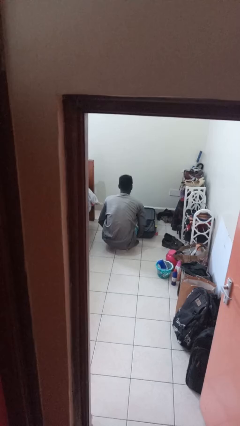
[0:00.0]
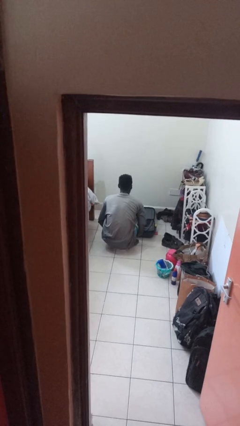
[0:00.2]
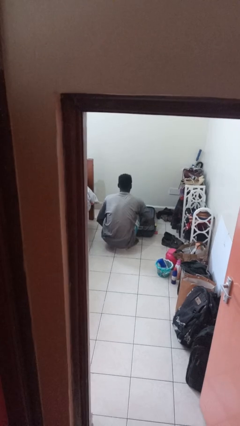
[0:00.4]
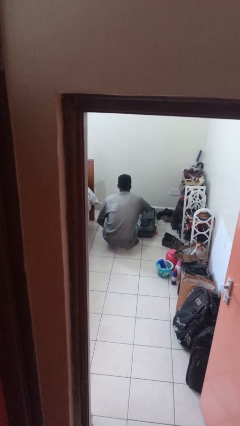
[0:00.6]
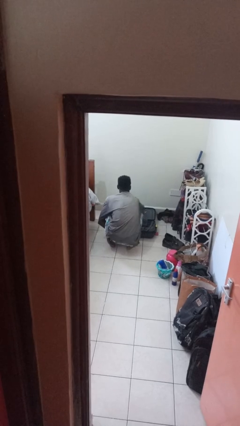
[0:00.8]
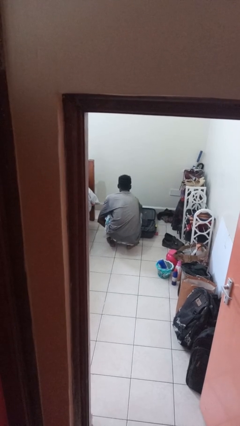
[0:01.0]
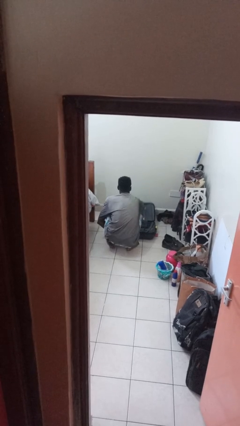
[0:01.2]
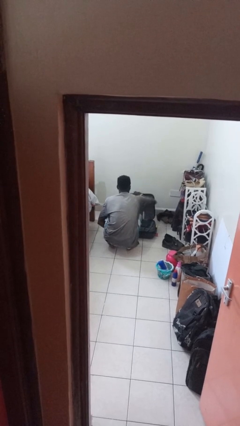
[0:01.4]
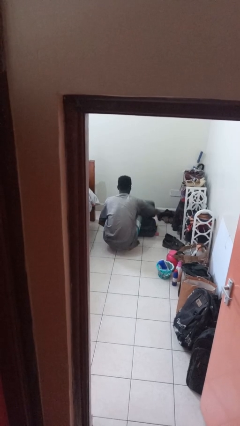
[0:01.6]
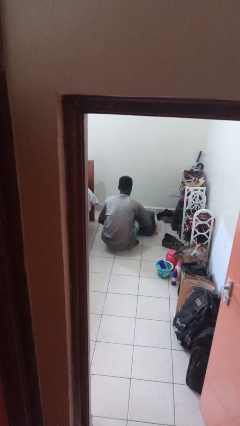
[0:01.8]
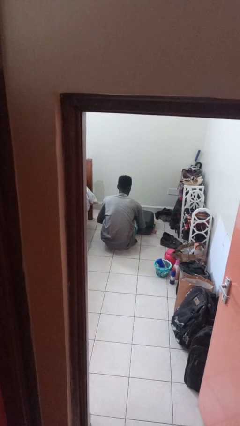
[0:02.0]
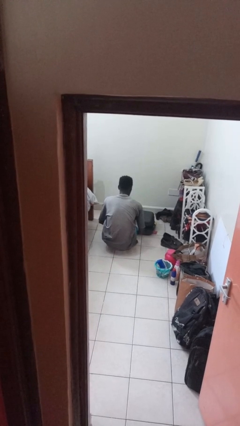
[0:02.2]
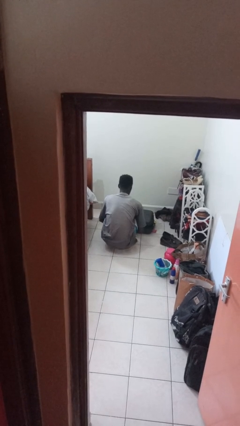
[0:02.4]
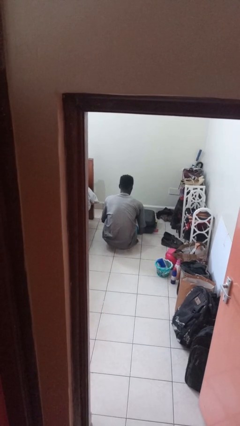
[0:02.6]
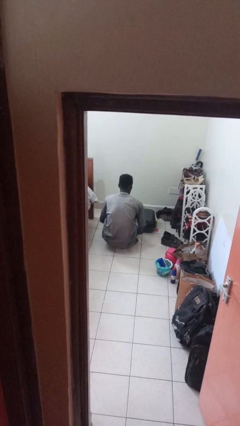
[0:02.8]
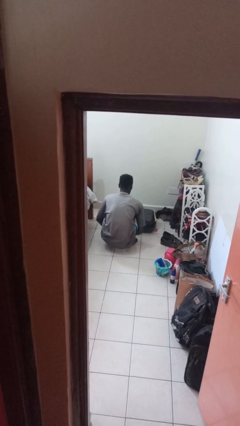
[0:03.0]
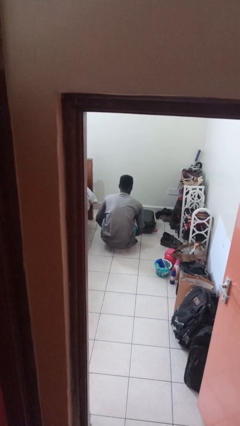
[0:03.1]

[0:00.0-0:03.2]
person closes suitcase

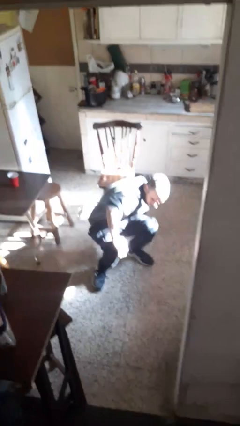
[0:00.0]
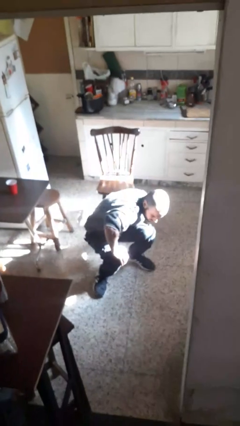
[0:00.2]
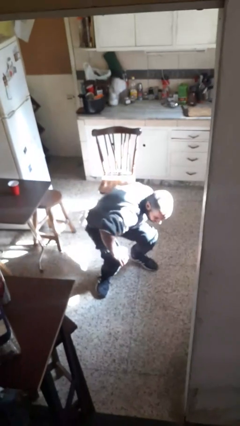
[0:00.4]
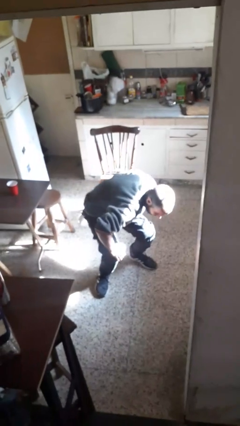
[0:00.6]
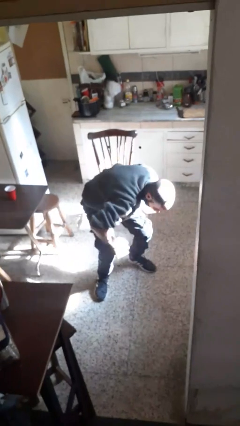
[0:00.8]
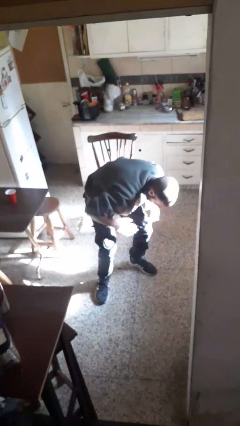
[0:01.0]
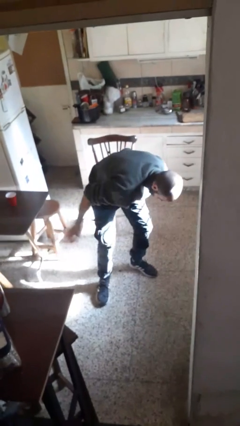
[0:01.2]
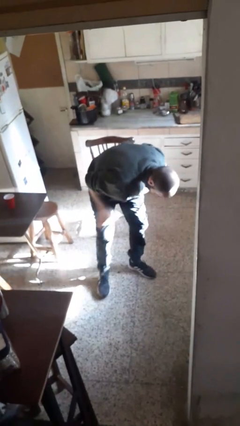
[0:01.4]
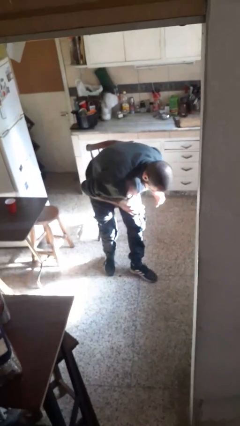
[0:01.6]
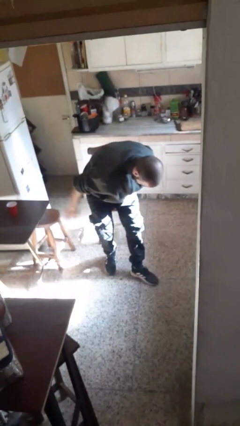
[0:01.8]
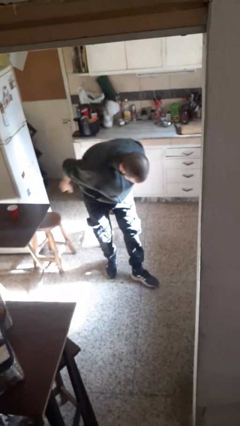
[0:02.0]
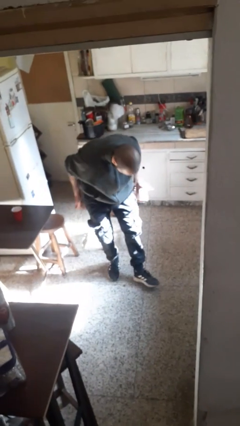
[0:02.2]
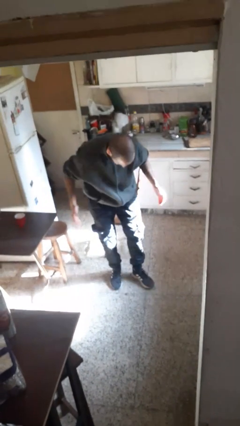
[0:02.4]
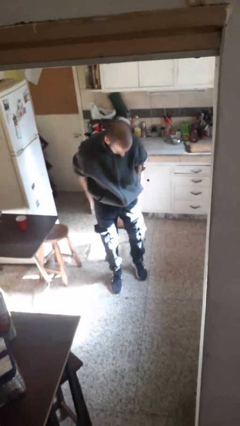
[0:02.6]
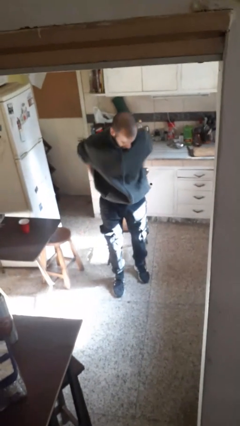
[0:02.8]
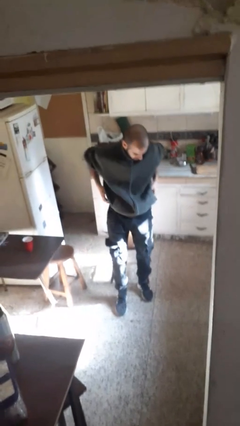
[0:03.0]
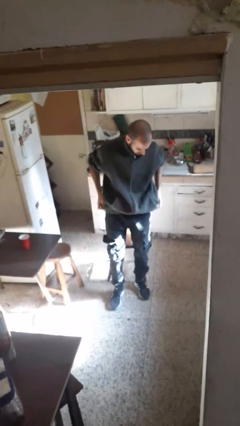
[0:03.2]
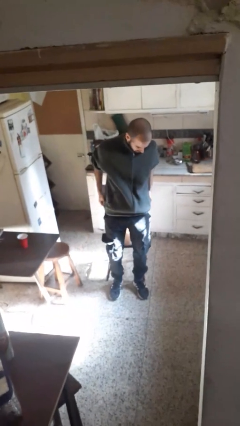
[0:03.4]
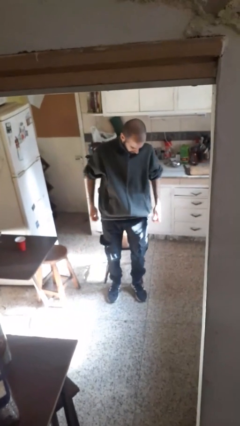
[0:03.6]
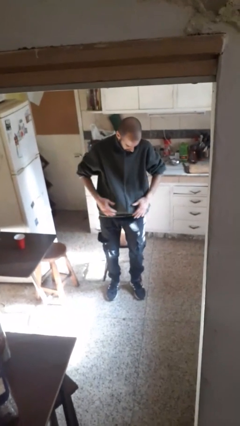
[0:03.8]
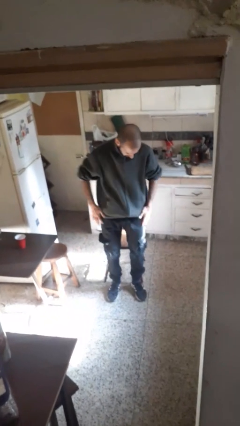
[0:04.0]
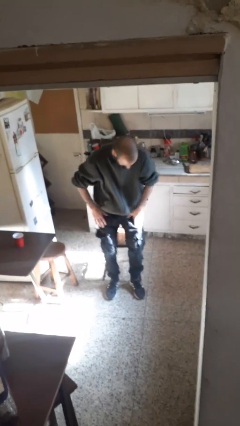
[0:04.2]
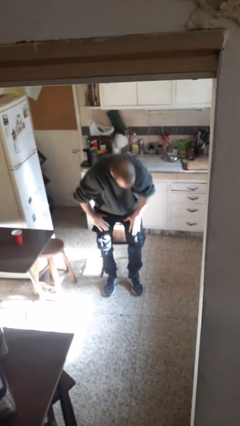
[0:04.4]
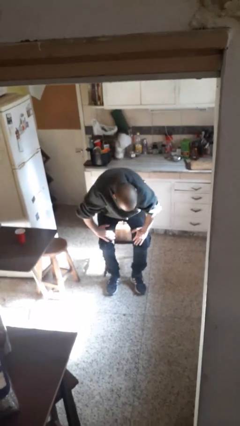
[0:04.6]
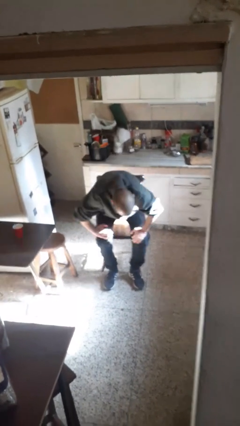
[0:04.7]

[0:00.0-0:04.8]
person stands up from floor

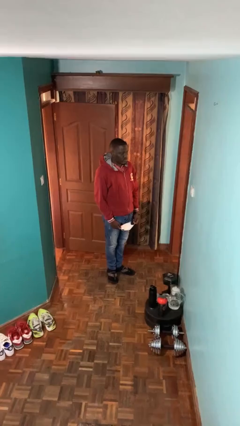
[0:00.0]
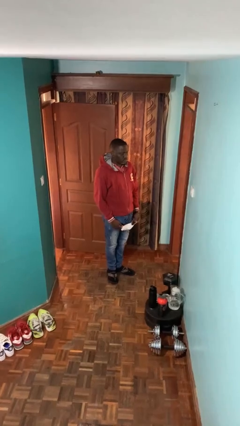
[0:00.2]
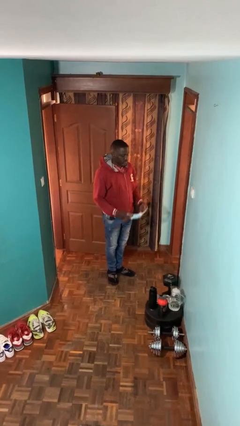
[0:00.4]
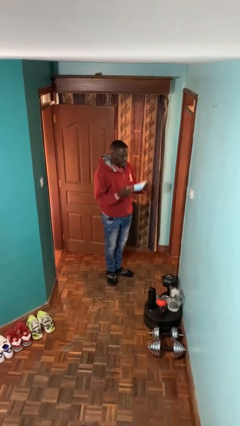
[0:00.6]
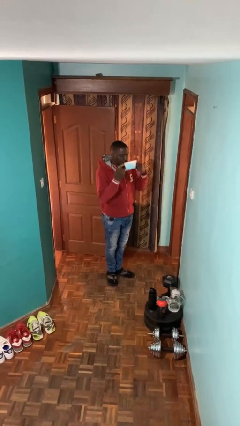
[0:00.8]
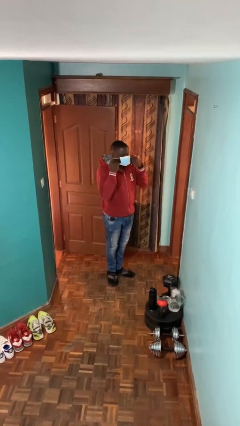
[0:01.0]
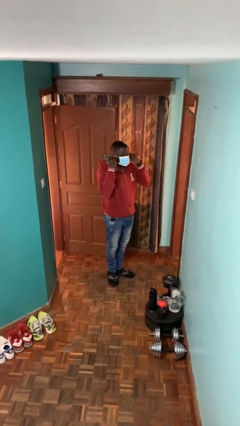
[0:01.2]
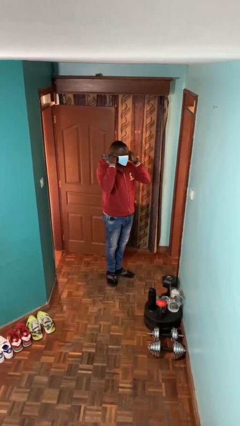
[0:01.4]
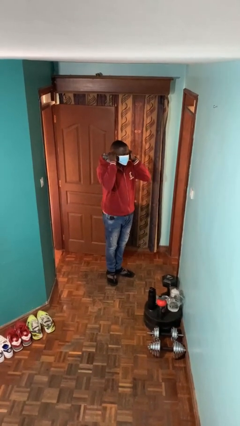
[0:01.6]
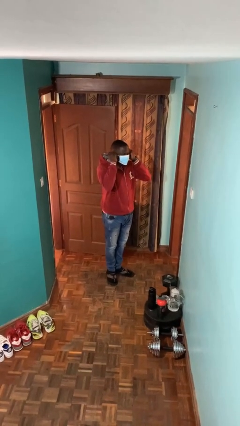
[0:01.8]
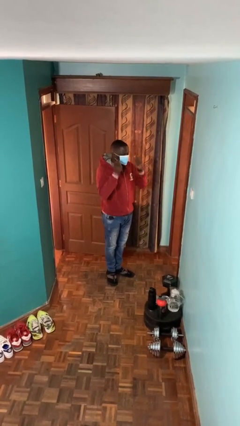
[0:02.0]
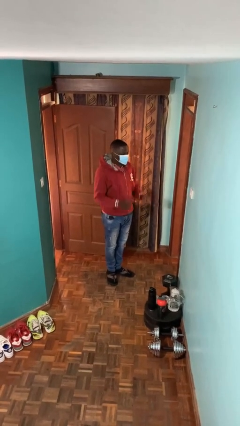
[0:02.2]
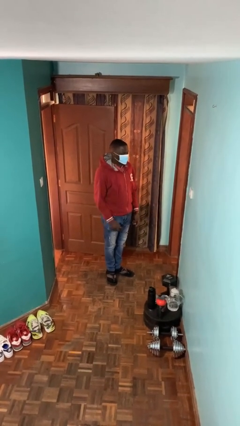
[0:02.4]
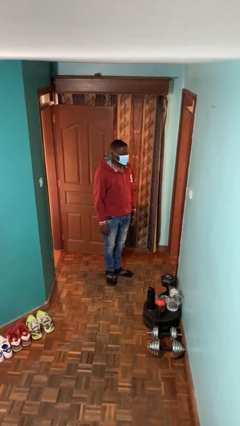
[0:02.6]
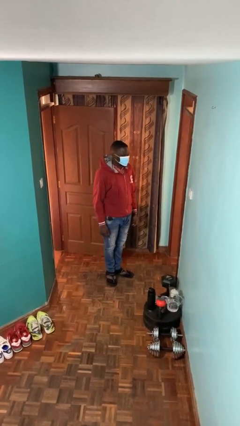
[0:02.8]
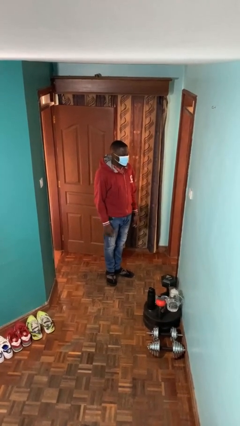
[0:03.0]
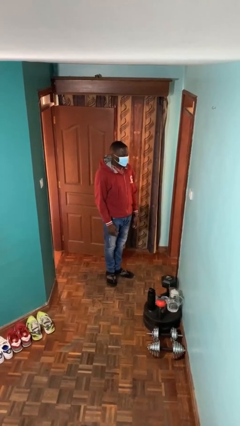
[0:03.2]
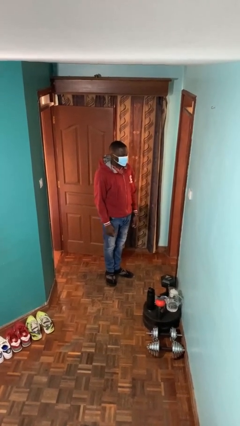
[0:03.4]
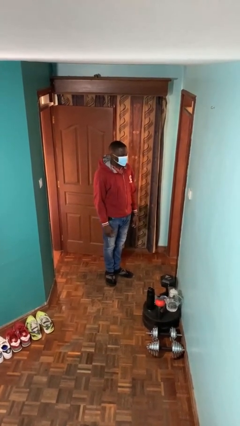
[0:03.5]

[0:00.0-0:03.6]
person puts on facemask

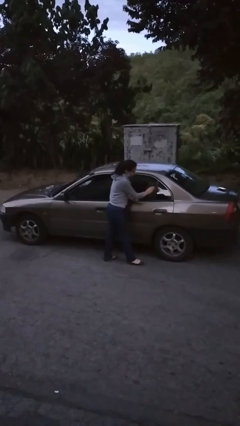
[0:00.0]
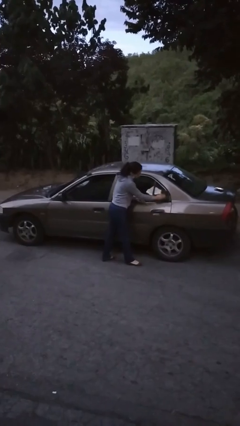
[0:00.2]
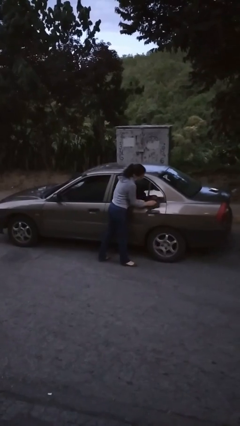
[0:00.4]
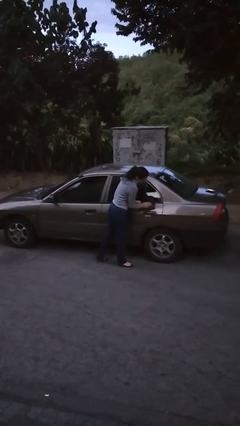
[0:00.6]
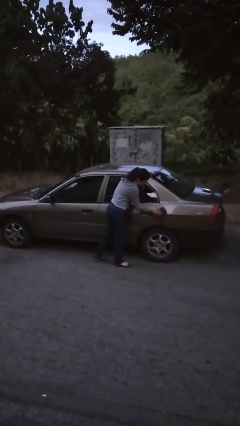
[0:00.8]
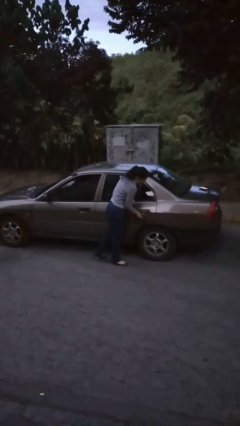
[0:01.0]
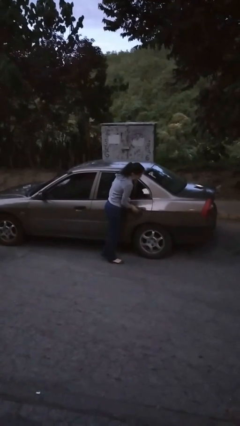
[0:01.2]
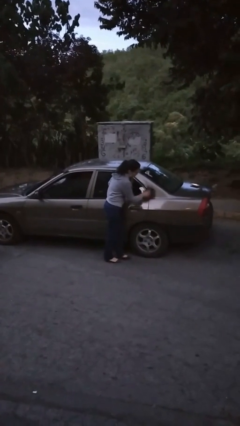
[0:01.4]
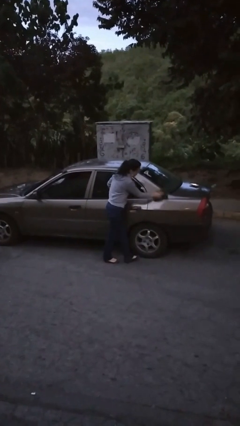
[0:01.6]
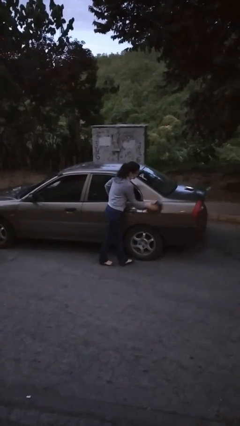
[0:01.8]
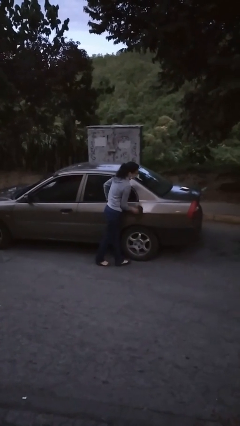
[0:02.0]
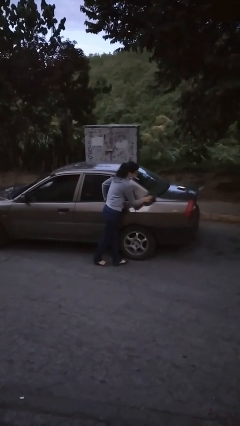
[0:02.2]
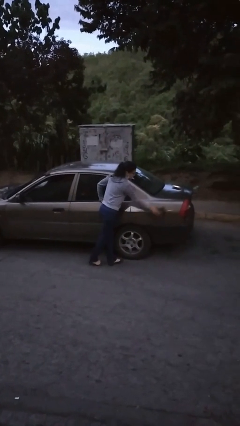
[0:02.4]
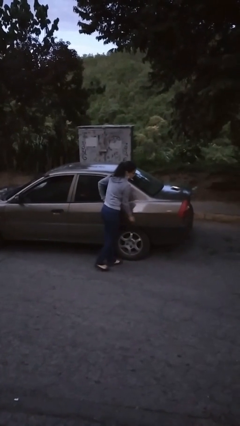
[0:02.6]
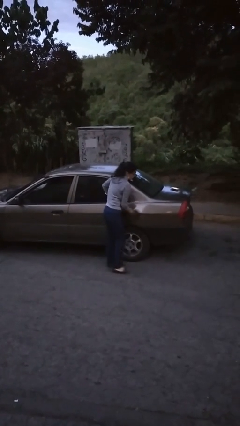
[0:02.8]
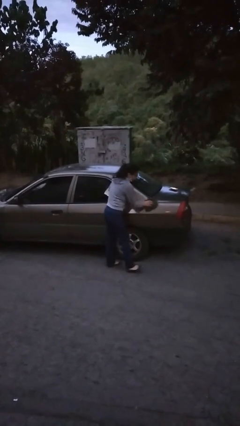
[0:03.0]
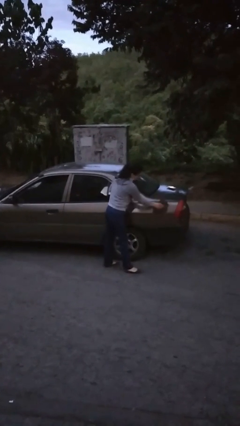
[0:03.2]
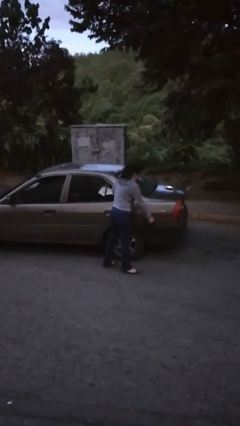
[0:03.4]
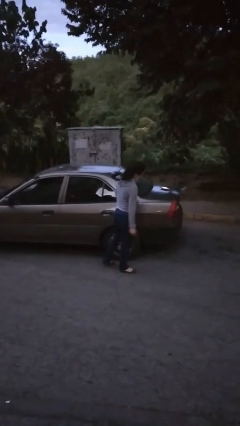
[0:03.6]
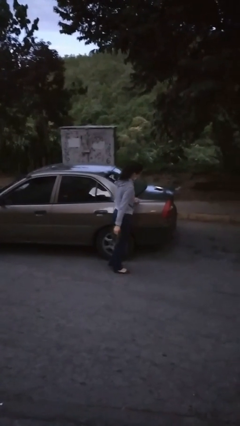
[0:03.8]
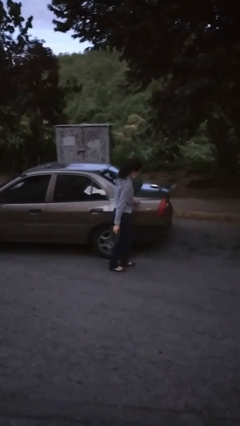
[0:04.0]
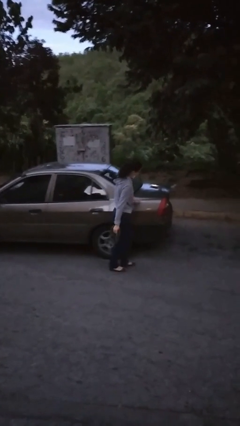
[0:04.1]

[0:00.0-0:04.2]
person polishes car with rag

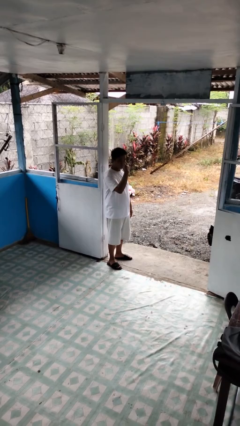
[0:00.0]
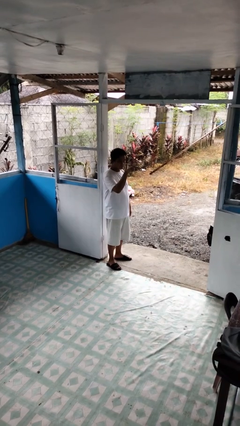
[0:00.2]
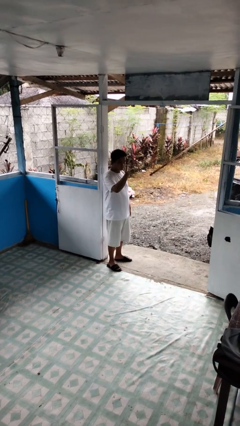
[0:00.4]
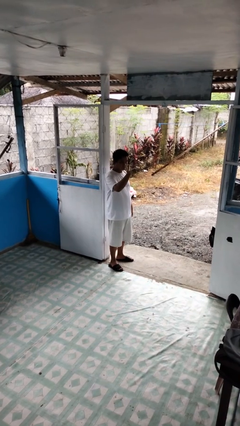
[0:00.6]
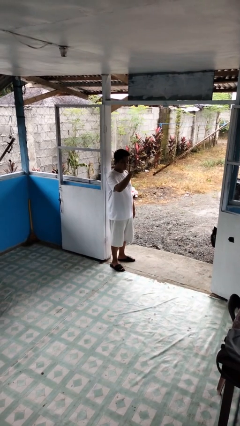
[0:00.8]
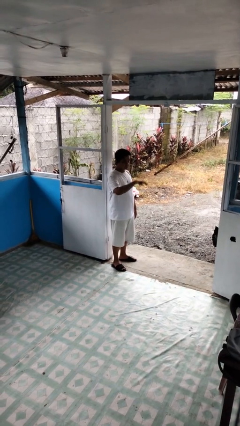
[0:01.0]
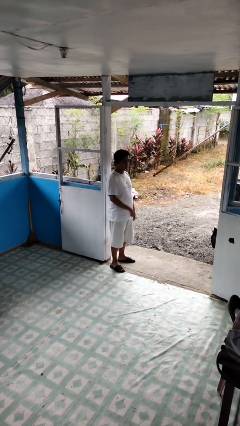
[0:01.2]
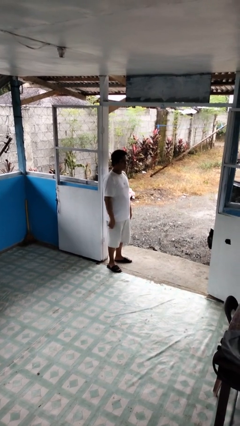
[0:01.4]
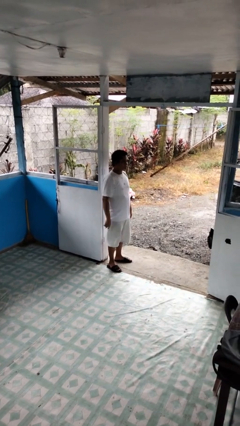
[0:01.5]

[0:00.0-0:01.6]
person gestures watch closely

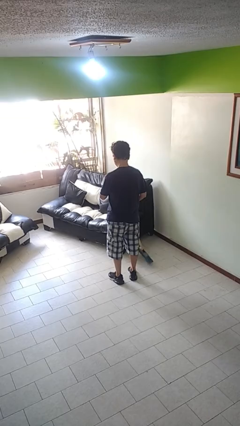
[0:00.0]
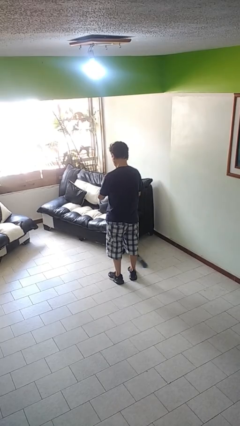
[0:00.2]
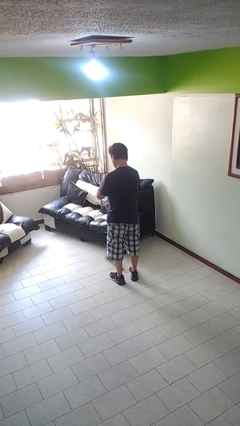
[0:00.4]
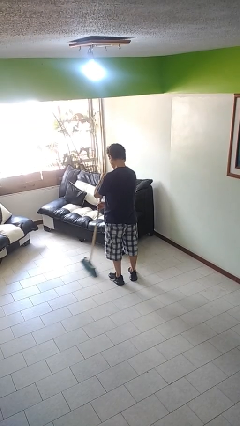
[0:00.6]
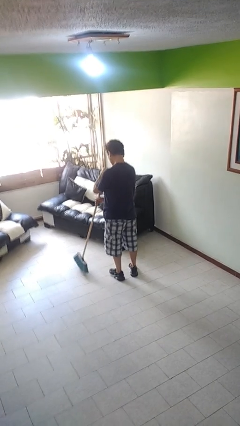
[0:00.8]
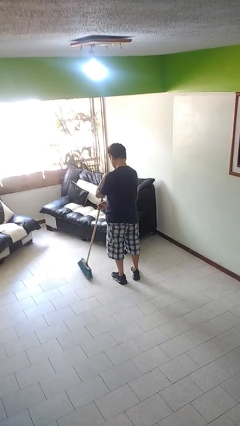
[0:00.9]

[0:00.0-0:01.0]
person sweeps floor
